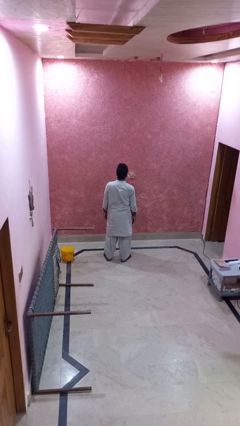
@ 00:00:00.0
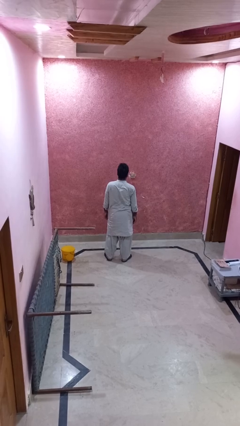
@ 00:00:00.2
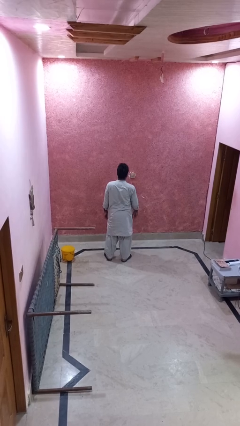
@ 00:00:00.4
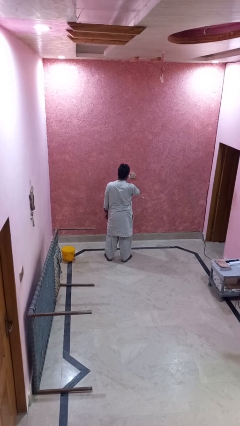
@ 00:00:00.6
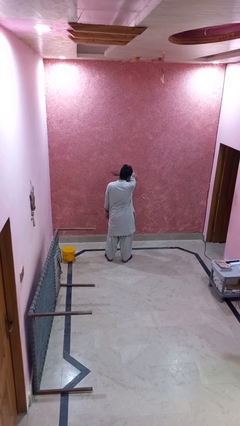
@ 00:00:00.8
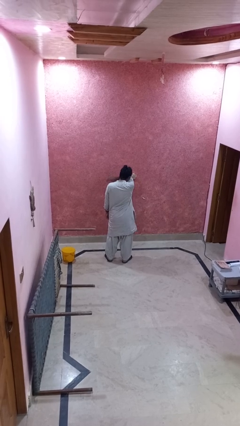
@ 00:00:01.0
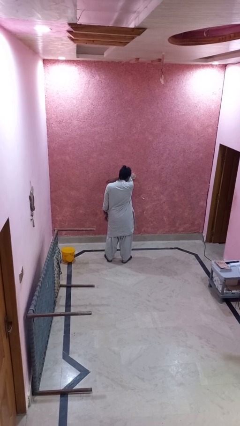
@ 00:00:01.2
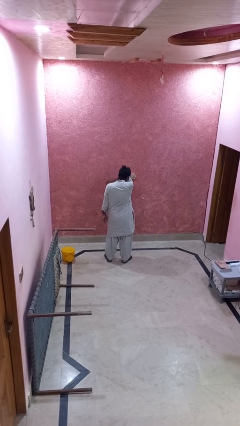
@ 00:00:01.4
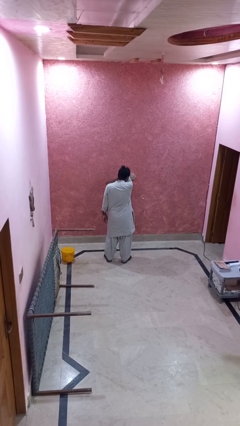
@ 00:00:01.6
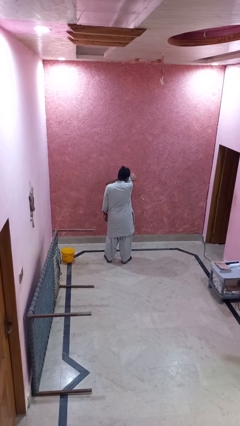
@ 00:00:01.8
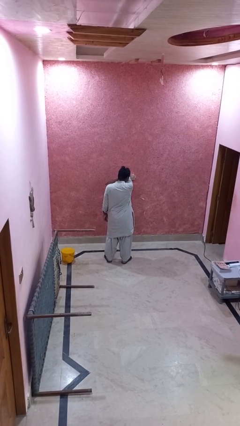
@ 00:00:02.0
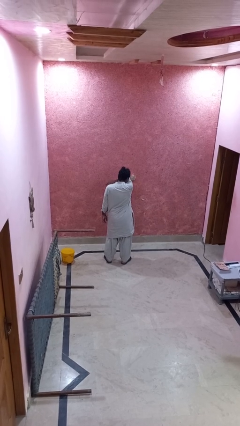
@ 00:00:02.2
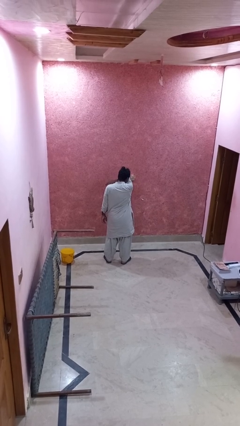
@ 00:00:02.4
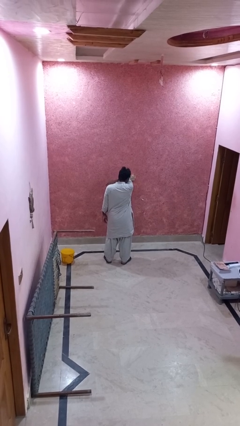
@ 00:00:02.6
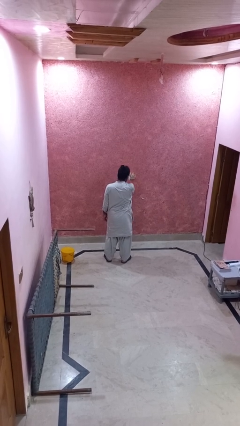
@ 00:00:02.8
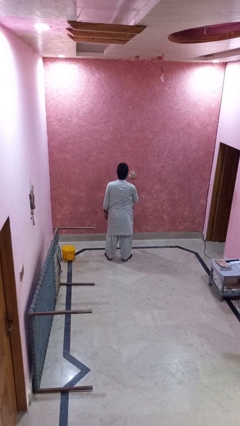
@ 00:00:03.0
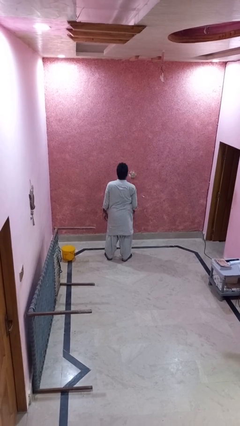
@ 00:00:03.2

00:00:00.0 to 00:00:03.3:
person sneezes into arm

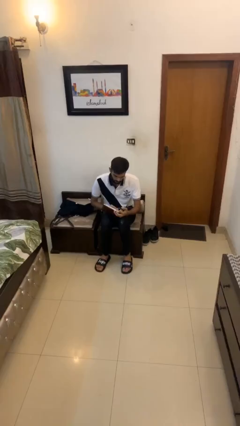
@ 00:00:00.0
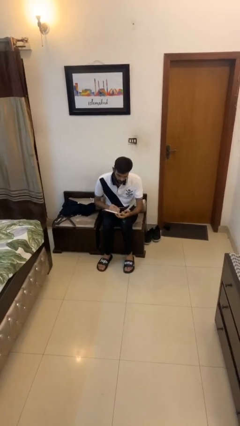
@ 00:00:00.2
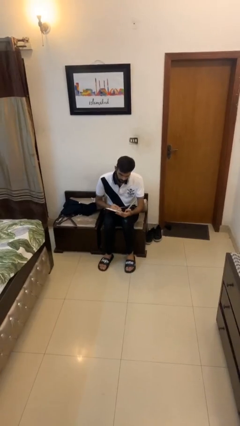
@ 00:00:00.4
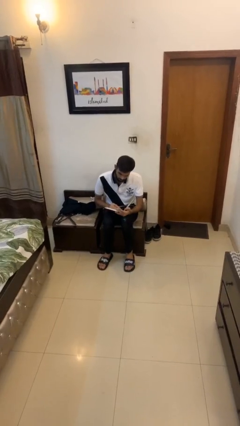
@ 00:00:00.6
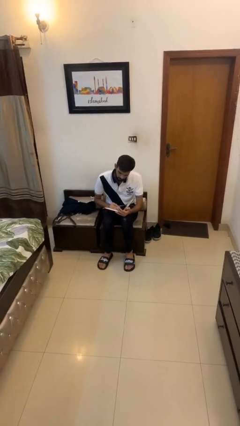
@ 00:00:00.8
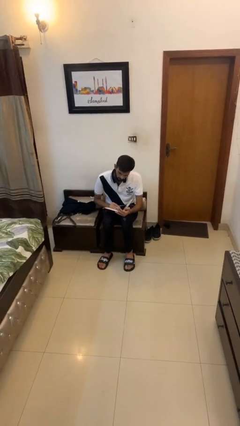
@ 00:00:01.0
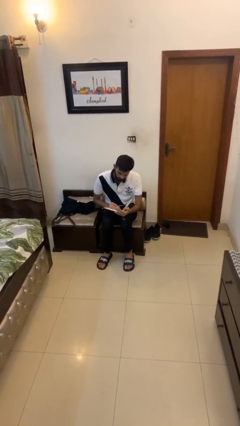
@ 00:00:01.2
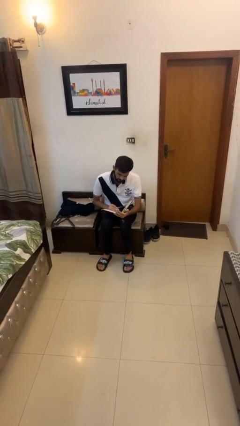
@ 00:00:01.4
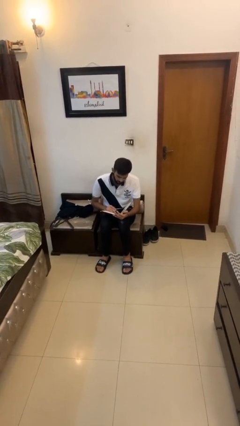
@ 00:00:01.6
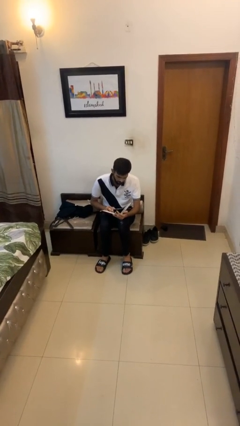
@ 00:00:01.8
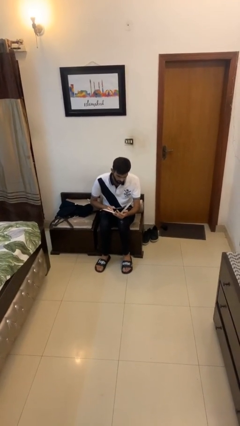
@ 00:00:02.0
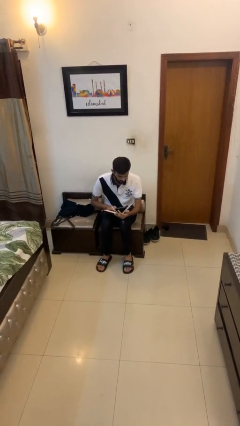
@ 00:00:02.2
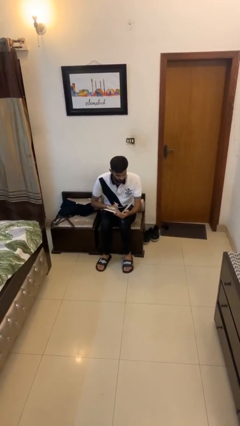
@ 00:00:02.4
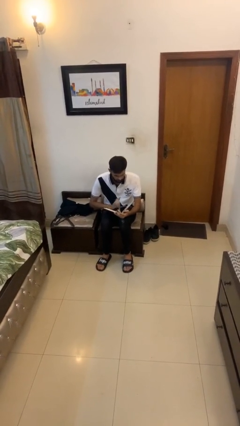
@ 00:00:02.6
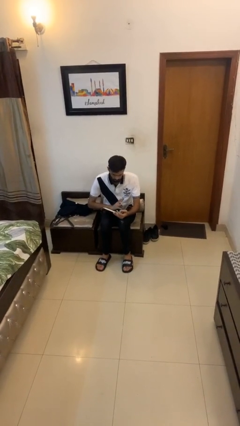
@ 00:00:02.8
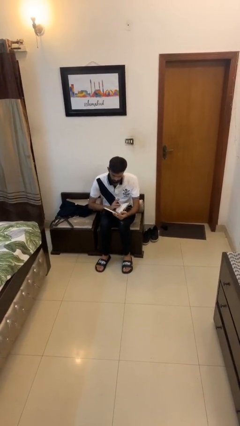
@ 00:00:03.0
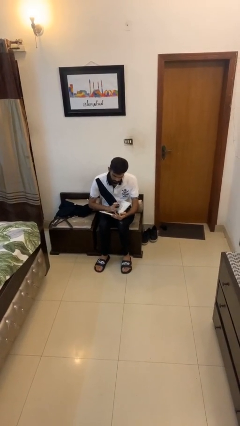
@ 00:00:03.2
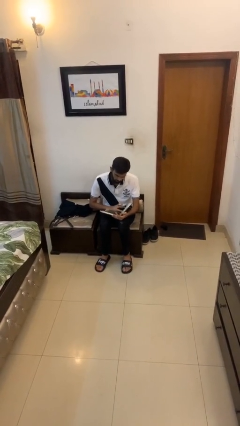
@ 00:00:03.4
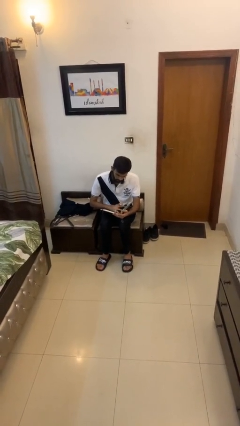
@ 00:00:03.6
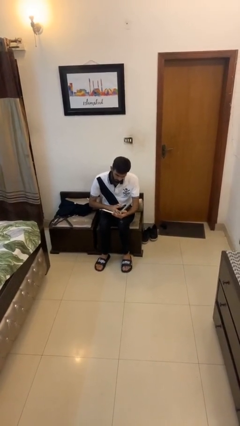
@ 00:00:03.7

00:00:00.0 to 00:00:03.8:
person reads document

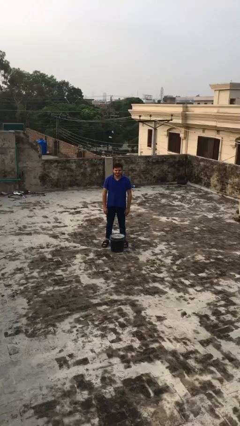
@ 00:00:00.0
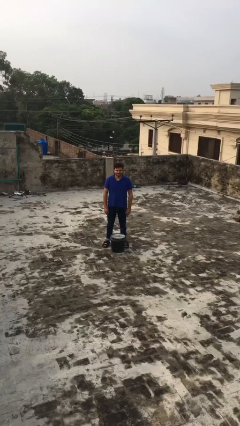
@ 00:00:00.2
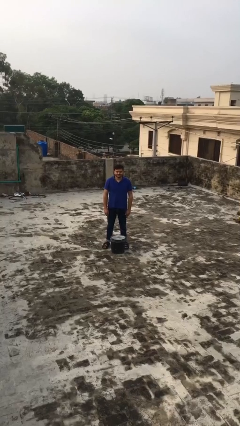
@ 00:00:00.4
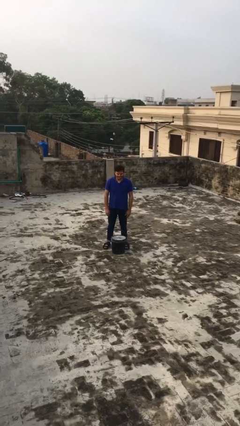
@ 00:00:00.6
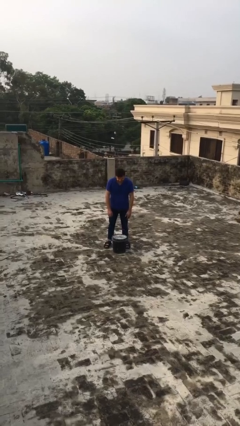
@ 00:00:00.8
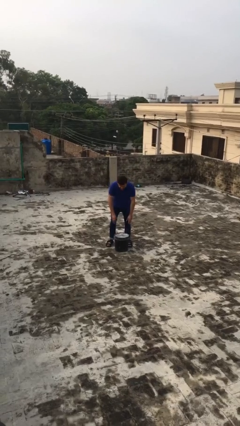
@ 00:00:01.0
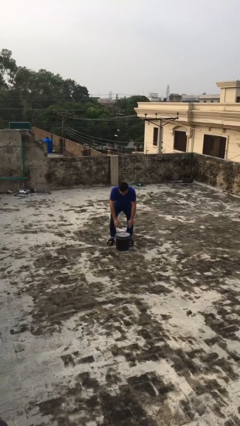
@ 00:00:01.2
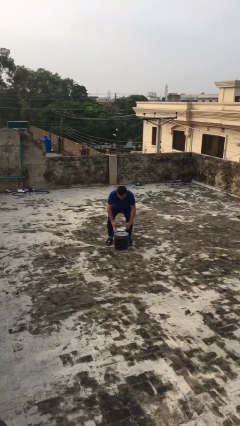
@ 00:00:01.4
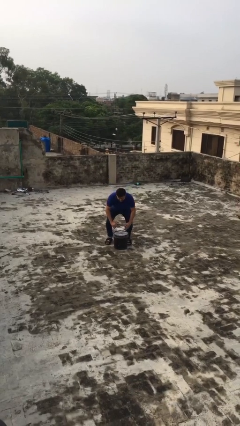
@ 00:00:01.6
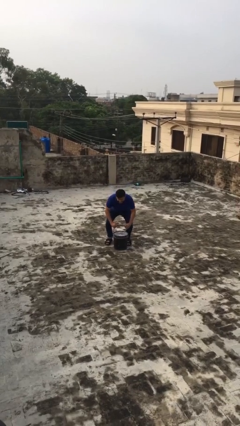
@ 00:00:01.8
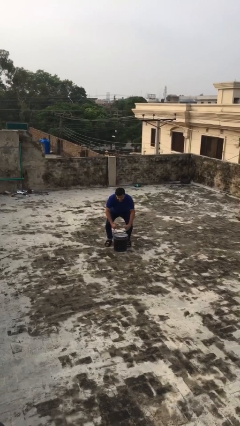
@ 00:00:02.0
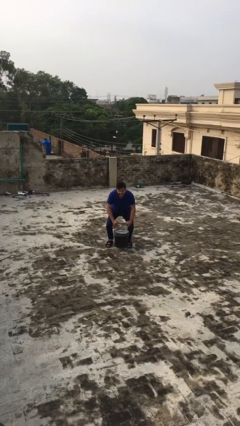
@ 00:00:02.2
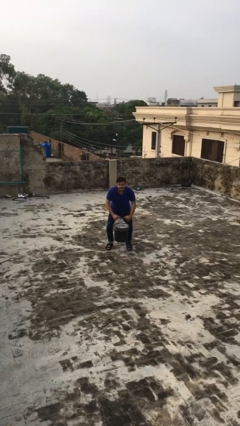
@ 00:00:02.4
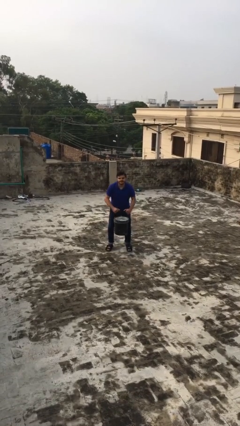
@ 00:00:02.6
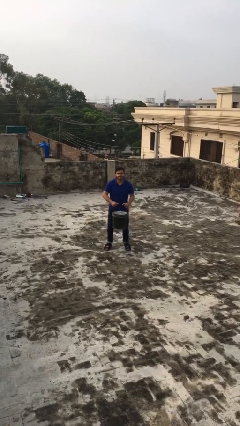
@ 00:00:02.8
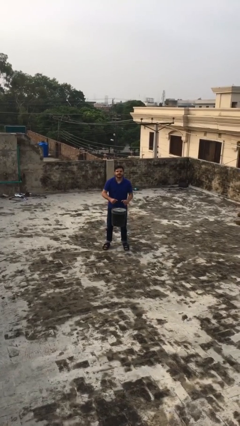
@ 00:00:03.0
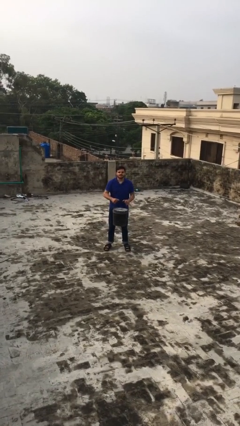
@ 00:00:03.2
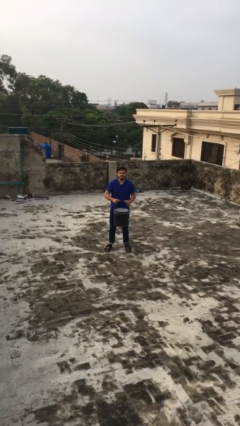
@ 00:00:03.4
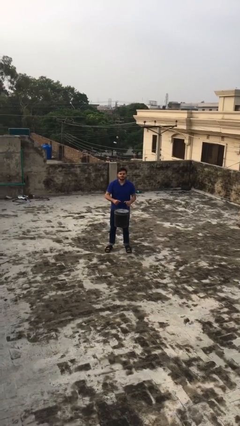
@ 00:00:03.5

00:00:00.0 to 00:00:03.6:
person picks up object from floor

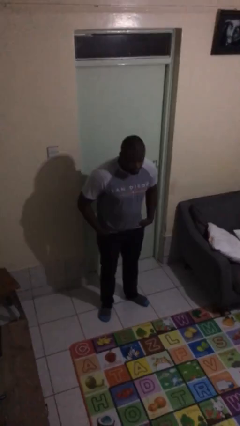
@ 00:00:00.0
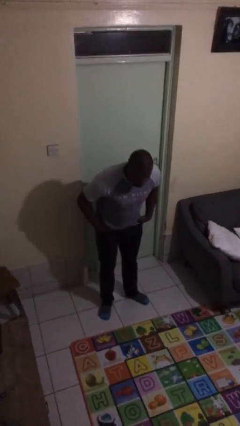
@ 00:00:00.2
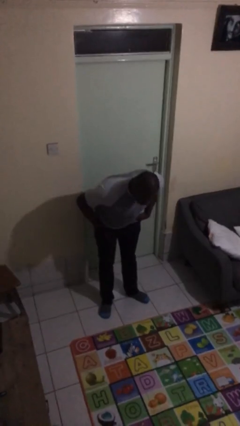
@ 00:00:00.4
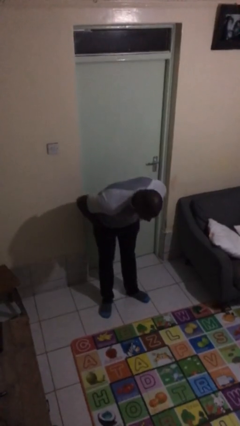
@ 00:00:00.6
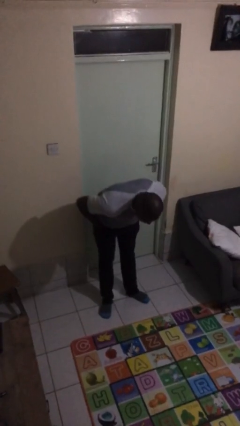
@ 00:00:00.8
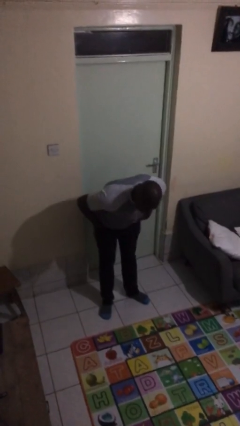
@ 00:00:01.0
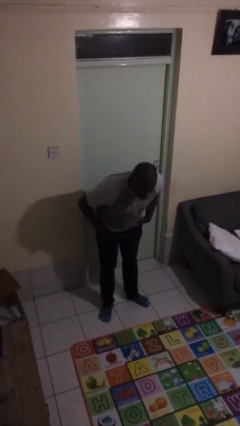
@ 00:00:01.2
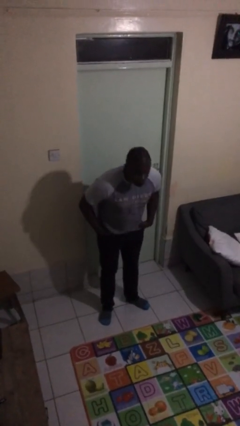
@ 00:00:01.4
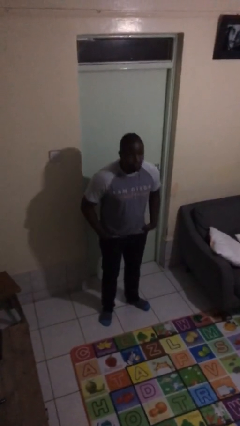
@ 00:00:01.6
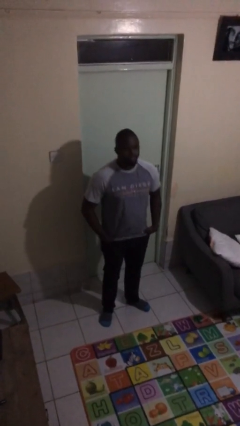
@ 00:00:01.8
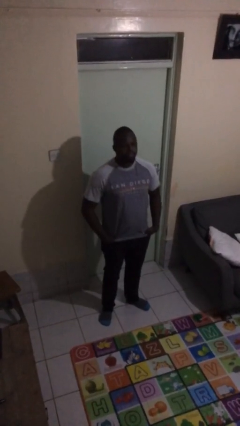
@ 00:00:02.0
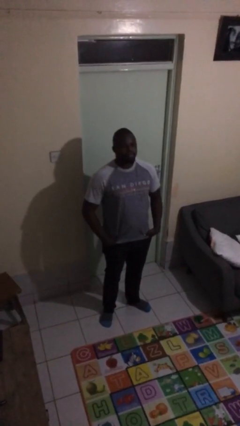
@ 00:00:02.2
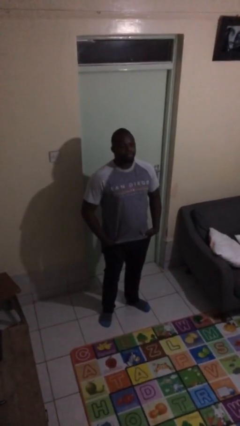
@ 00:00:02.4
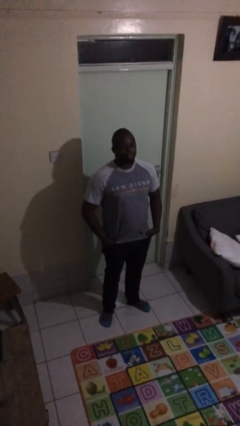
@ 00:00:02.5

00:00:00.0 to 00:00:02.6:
person bows

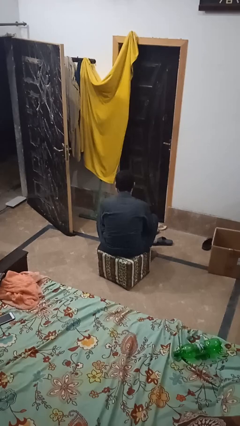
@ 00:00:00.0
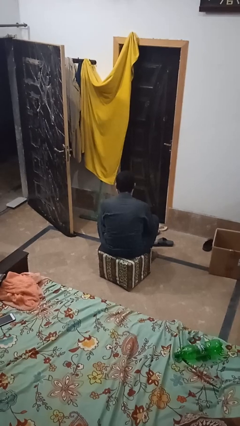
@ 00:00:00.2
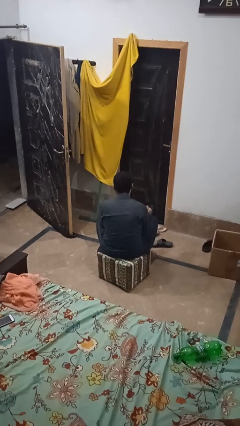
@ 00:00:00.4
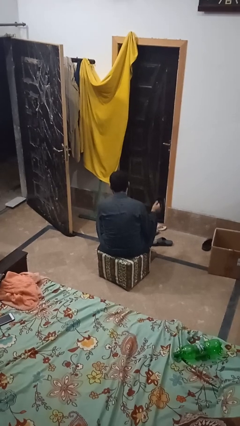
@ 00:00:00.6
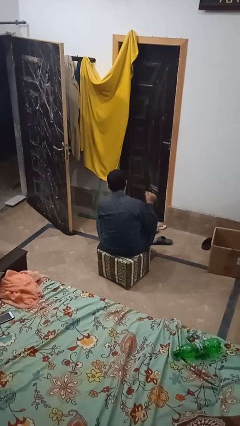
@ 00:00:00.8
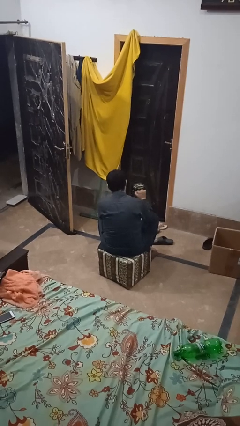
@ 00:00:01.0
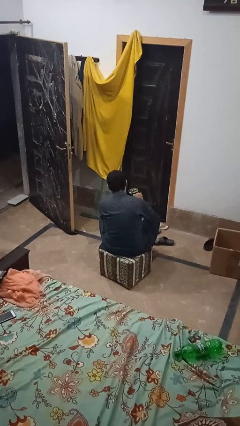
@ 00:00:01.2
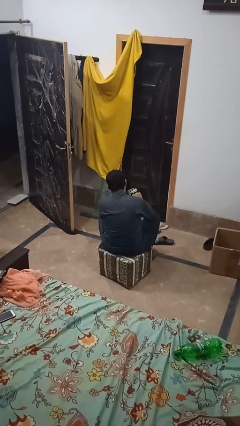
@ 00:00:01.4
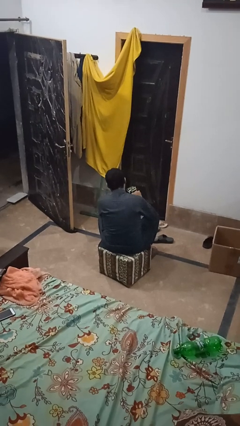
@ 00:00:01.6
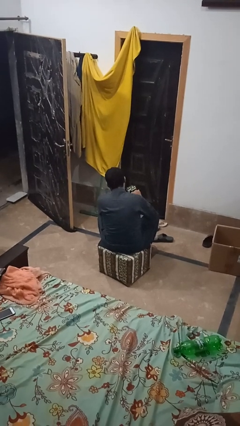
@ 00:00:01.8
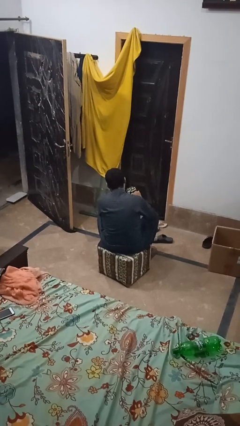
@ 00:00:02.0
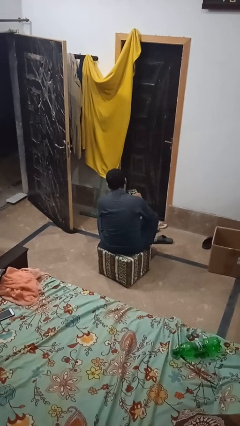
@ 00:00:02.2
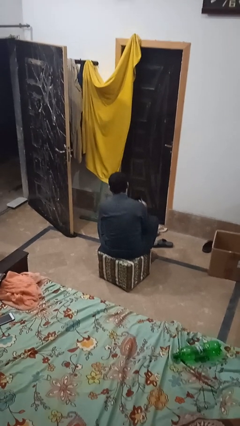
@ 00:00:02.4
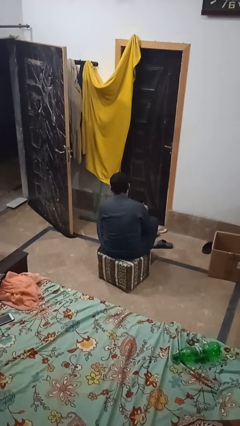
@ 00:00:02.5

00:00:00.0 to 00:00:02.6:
person pours coffee into mug

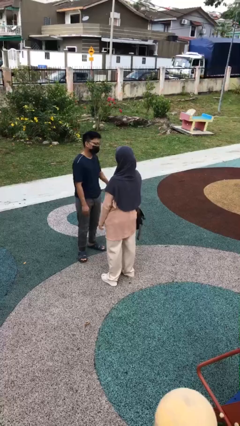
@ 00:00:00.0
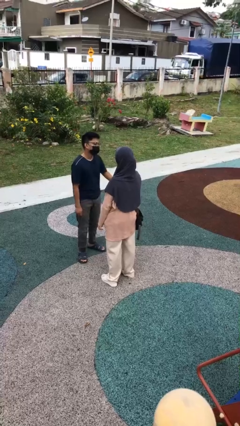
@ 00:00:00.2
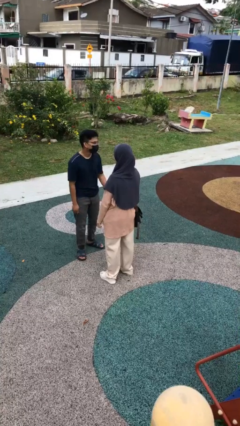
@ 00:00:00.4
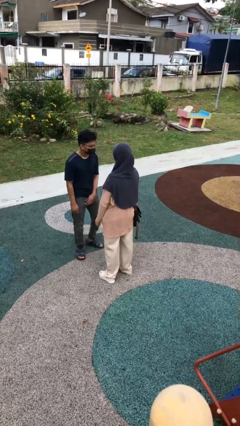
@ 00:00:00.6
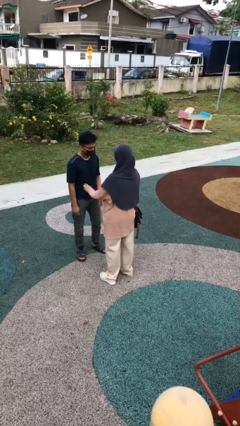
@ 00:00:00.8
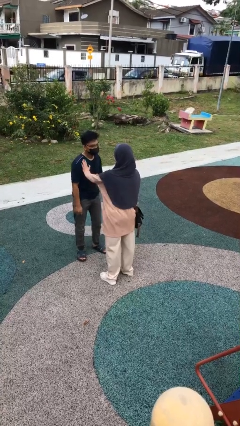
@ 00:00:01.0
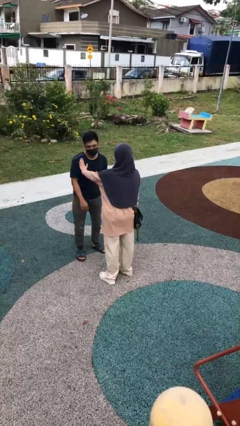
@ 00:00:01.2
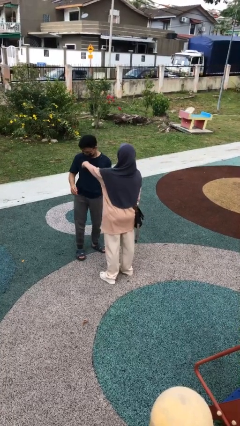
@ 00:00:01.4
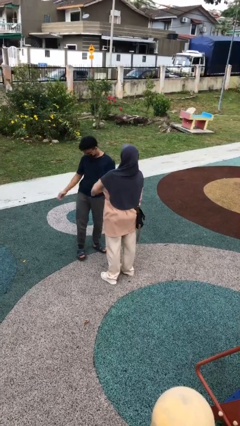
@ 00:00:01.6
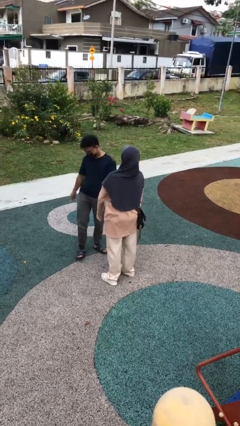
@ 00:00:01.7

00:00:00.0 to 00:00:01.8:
person shoves person
